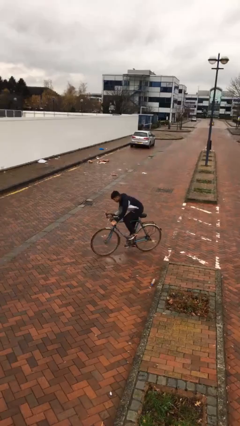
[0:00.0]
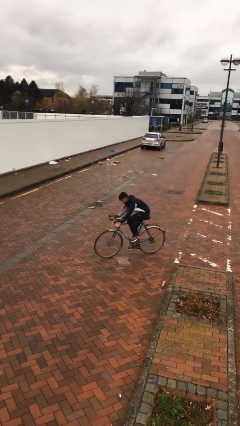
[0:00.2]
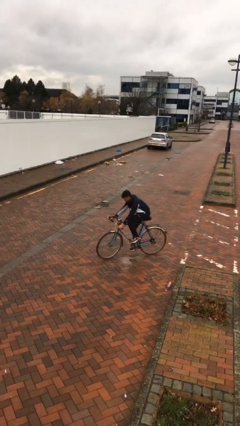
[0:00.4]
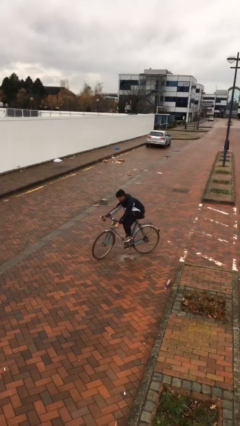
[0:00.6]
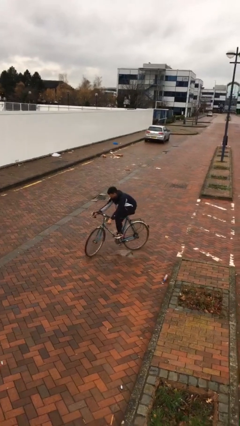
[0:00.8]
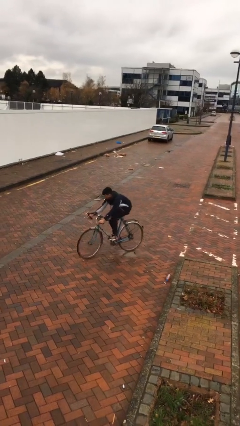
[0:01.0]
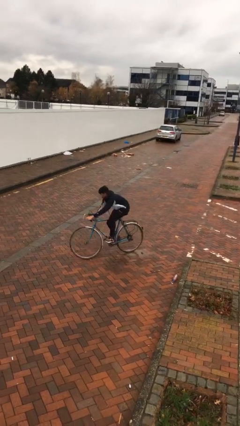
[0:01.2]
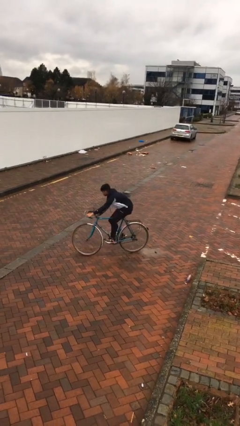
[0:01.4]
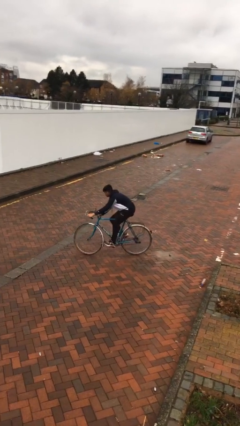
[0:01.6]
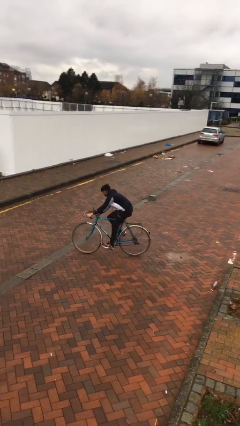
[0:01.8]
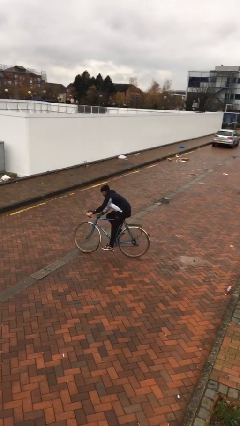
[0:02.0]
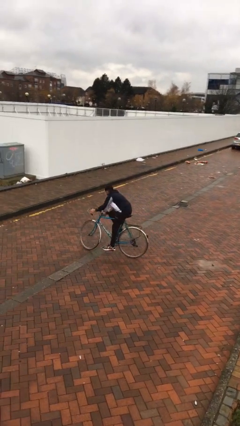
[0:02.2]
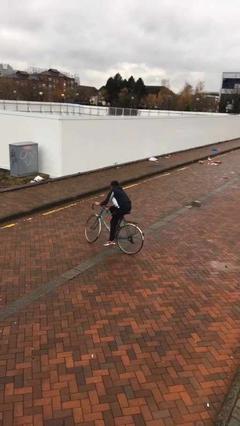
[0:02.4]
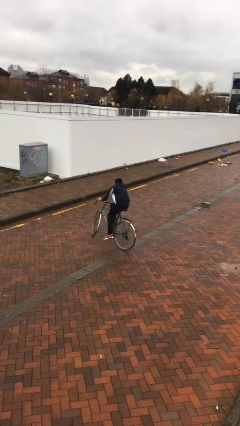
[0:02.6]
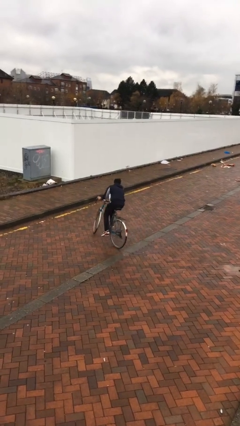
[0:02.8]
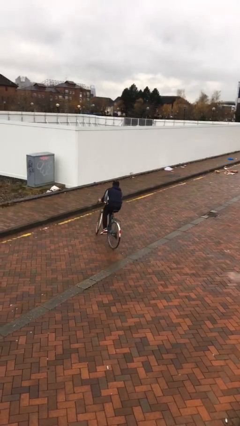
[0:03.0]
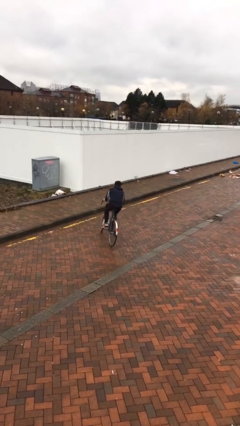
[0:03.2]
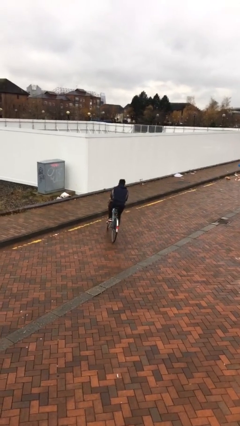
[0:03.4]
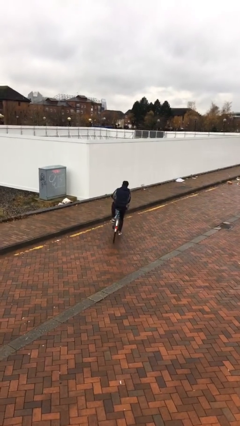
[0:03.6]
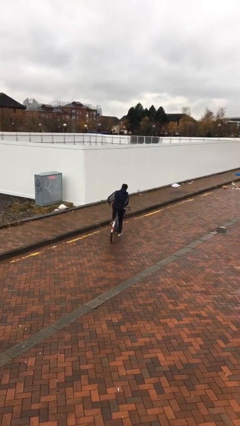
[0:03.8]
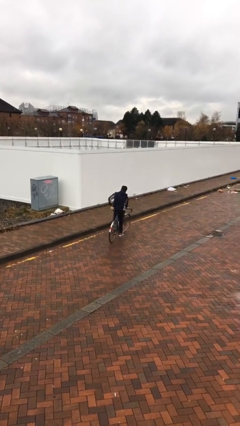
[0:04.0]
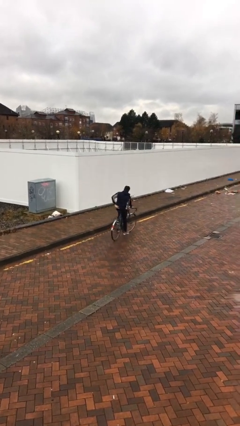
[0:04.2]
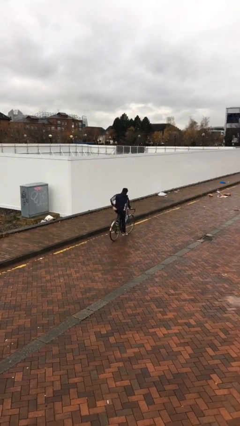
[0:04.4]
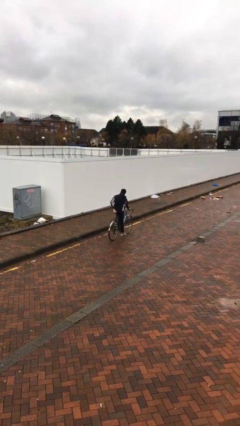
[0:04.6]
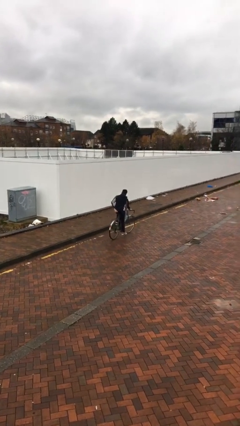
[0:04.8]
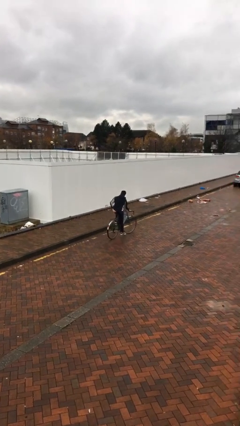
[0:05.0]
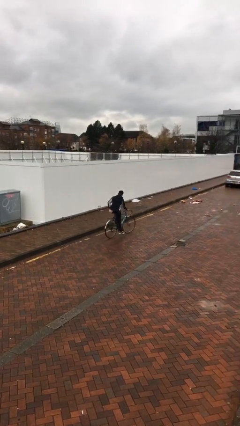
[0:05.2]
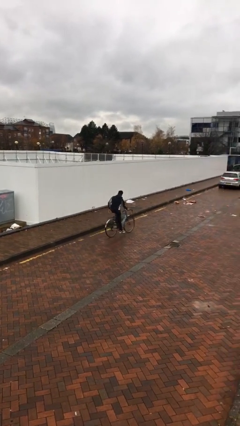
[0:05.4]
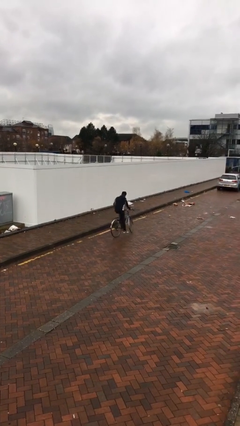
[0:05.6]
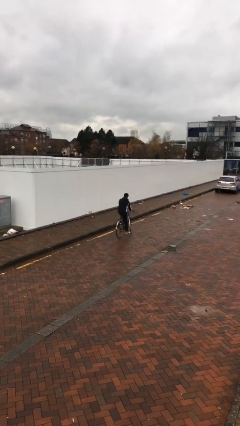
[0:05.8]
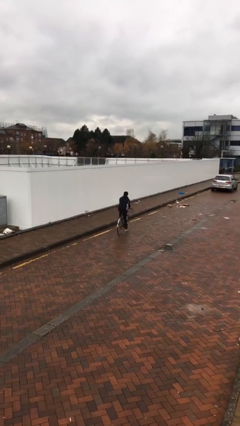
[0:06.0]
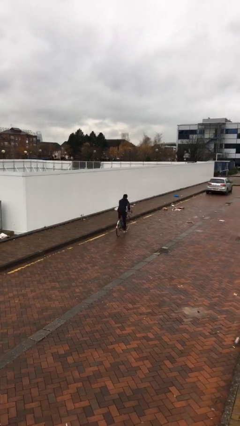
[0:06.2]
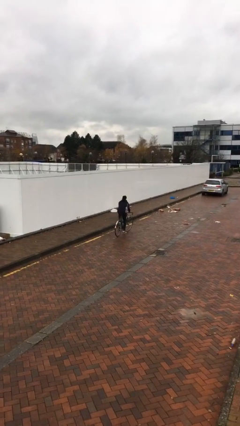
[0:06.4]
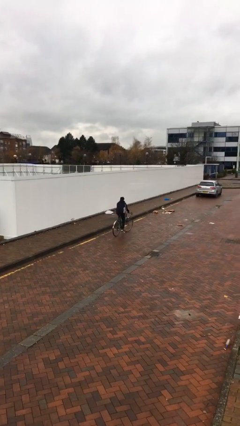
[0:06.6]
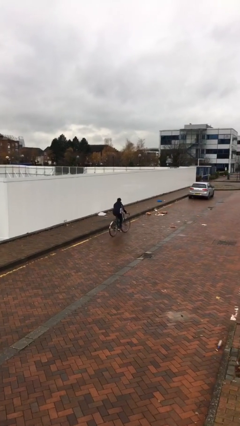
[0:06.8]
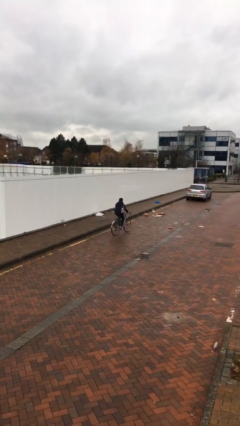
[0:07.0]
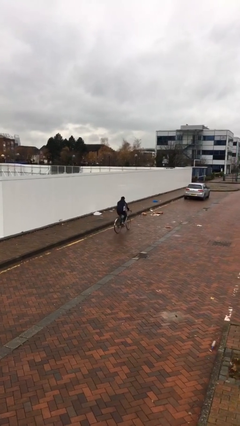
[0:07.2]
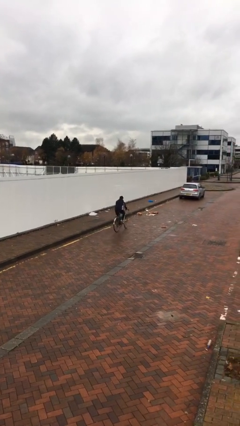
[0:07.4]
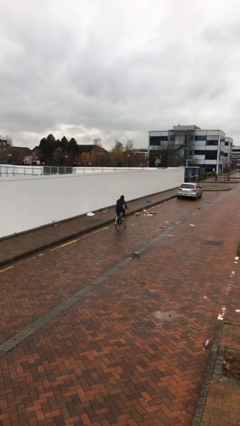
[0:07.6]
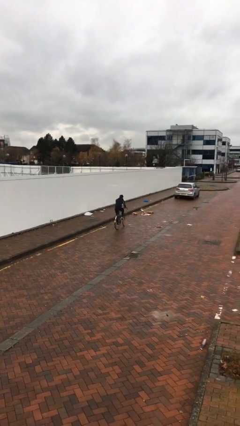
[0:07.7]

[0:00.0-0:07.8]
person rides bicycle

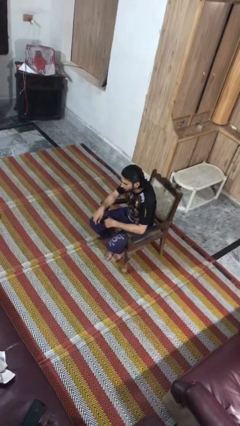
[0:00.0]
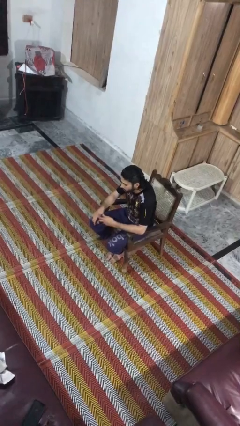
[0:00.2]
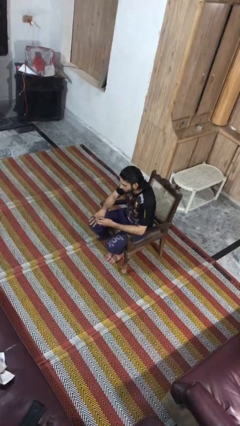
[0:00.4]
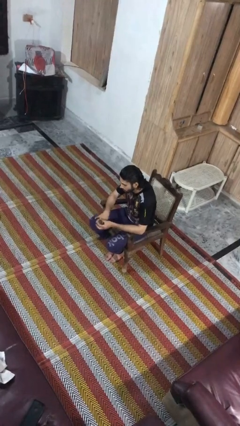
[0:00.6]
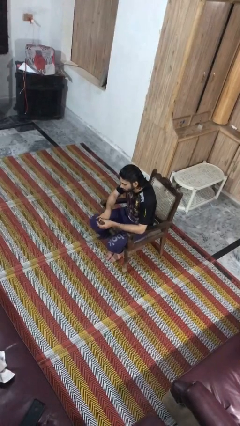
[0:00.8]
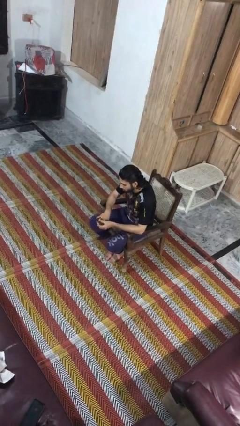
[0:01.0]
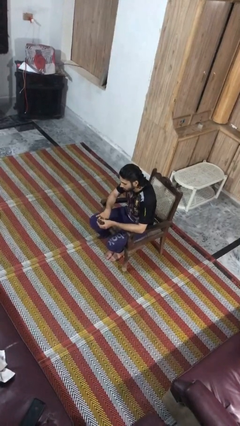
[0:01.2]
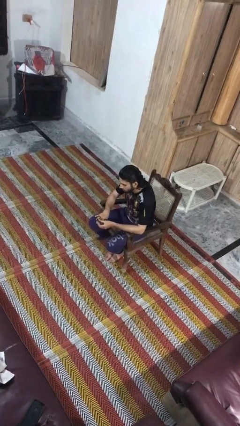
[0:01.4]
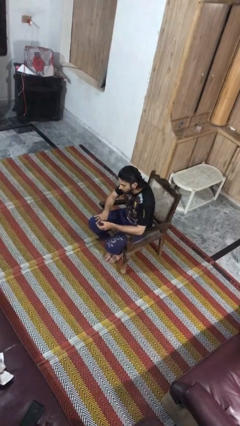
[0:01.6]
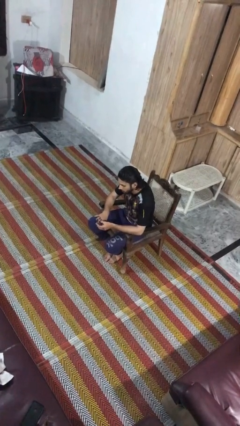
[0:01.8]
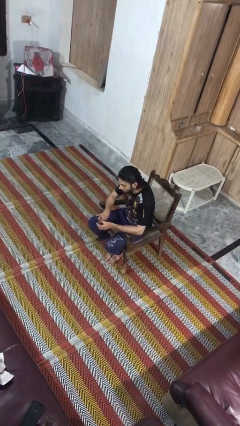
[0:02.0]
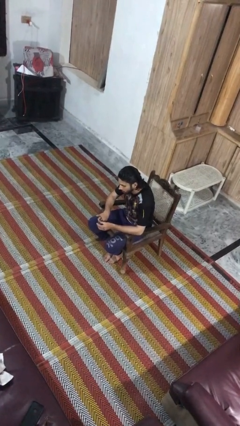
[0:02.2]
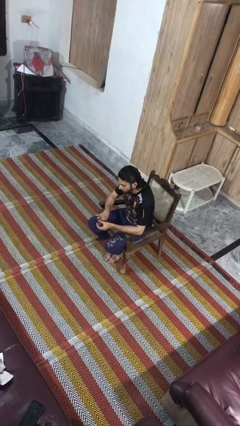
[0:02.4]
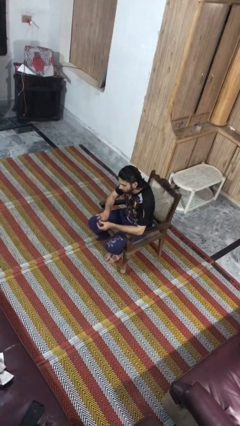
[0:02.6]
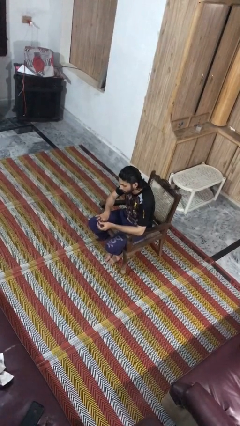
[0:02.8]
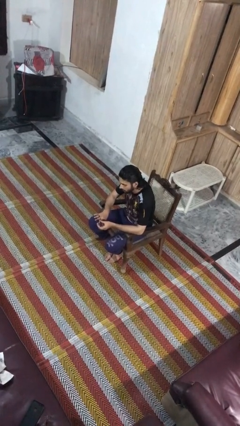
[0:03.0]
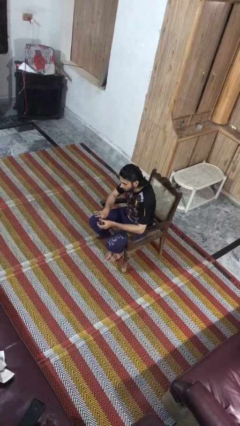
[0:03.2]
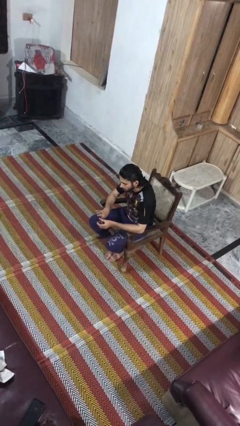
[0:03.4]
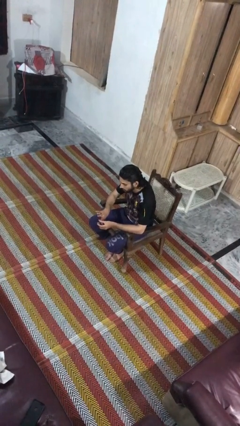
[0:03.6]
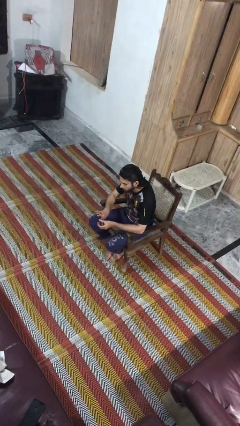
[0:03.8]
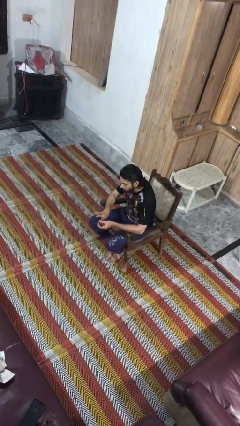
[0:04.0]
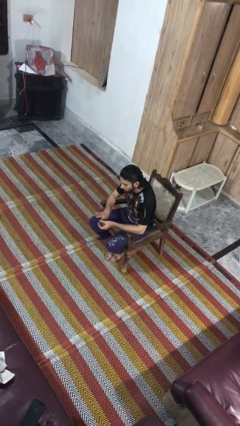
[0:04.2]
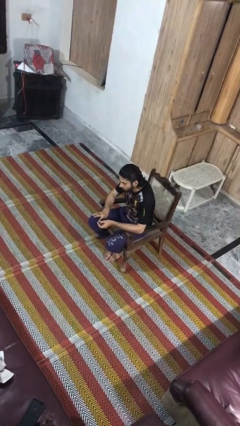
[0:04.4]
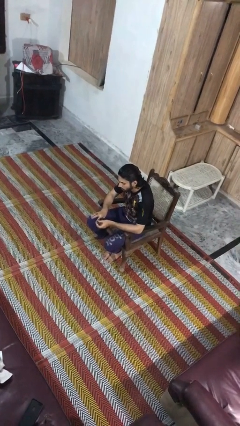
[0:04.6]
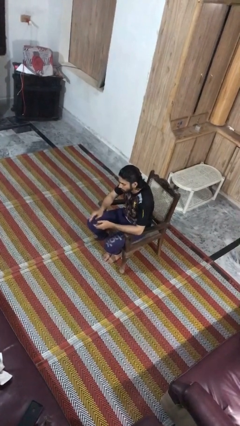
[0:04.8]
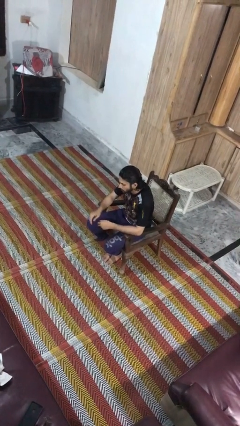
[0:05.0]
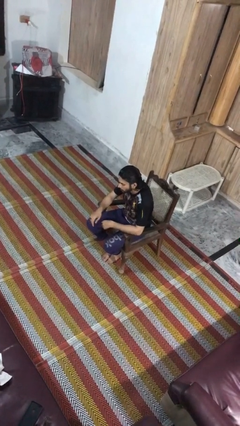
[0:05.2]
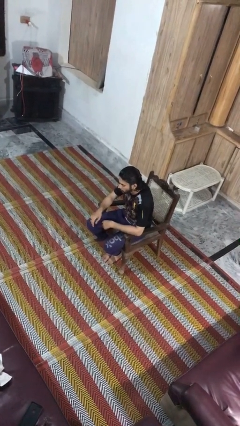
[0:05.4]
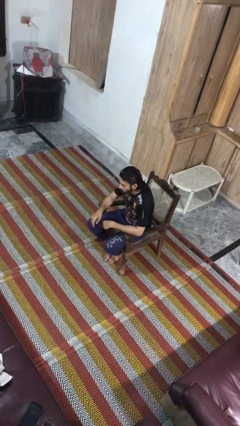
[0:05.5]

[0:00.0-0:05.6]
person clips fingernails

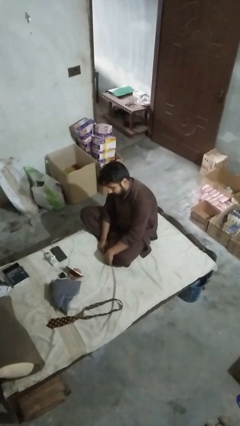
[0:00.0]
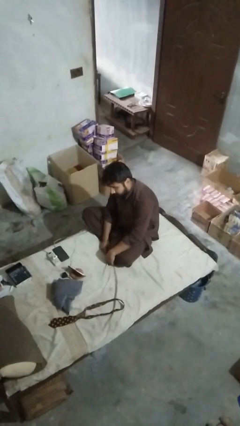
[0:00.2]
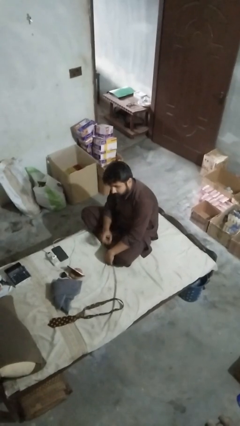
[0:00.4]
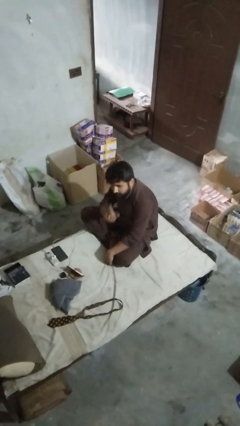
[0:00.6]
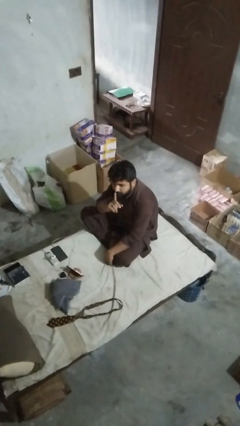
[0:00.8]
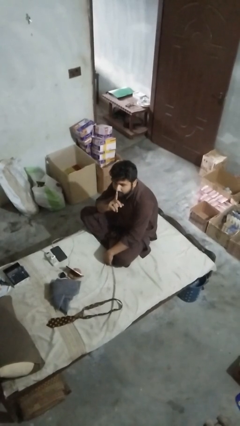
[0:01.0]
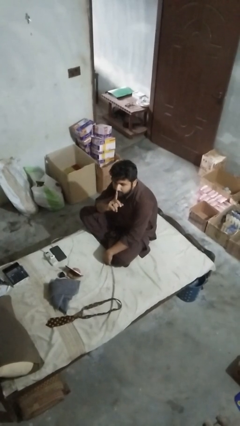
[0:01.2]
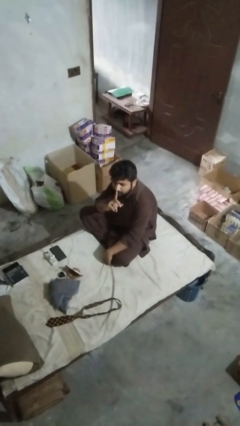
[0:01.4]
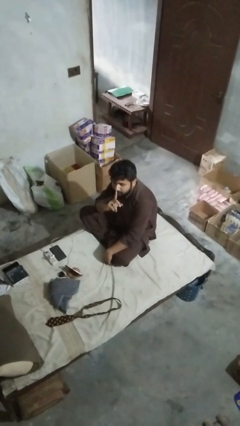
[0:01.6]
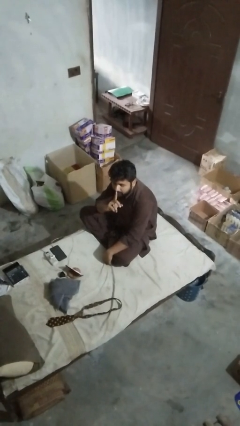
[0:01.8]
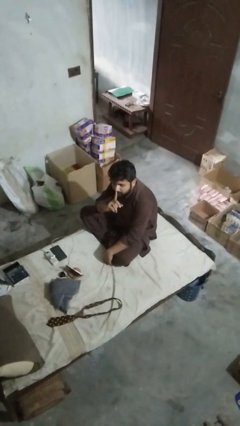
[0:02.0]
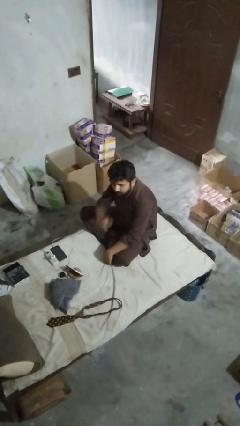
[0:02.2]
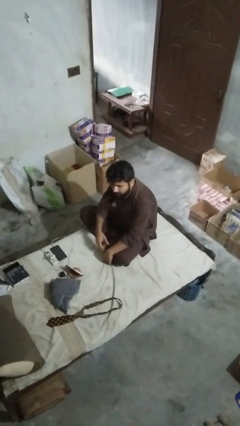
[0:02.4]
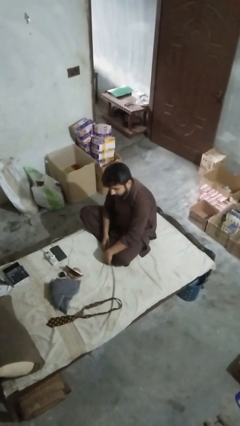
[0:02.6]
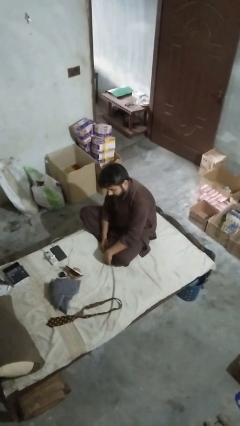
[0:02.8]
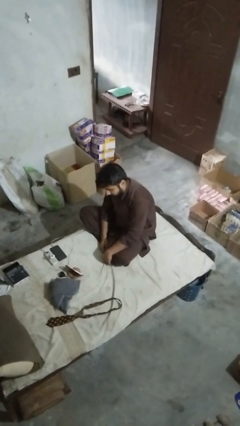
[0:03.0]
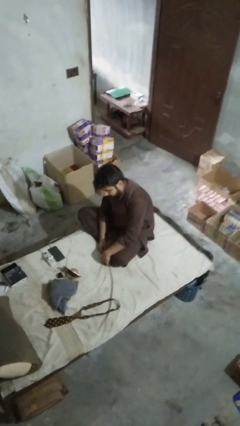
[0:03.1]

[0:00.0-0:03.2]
person gestures be quiet

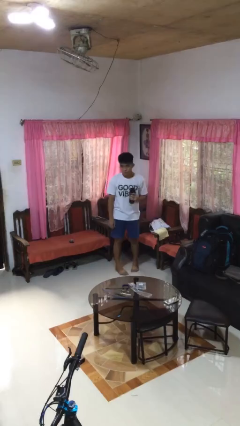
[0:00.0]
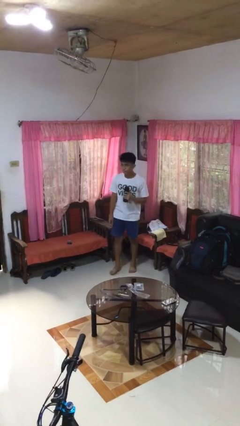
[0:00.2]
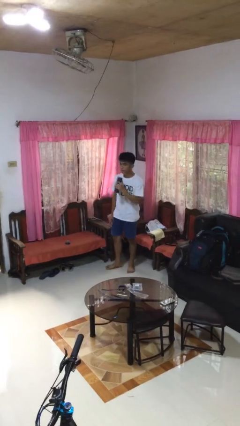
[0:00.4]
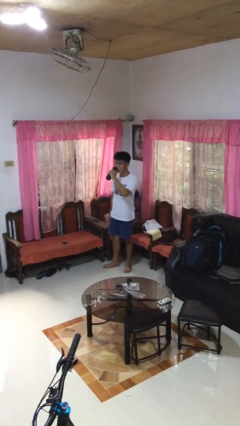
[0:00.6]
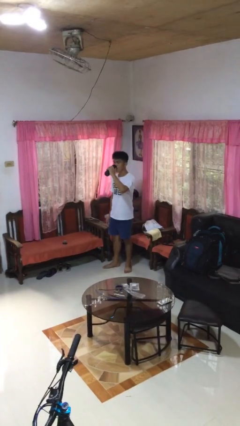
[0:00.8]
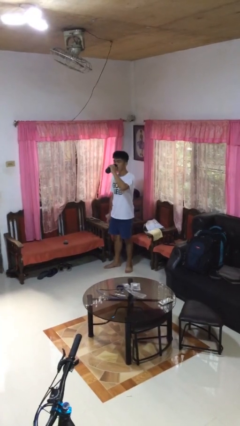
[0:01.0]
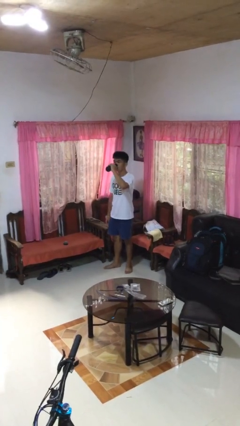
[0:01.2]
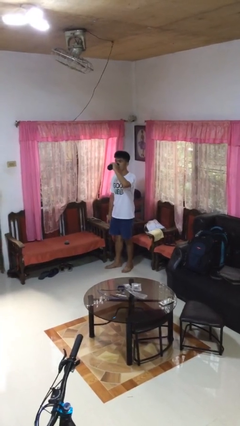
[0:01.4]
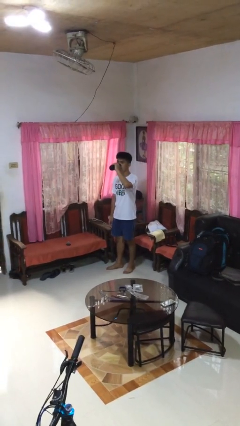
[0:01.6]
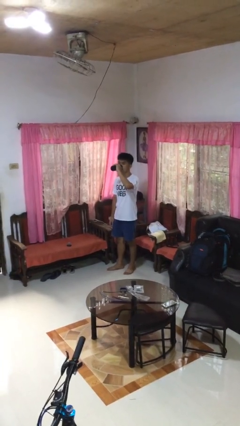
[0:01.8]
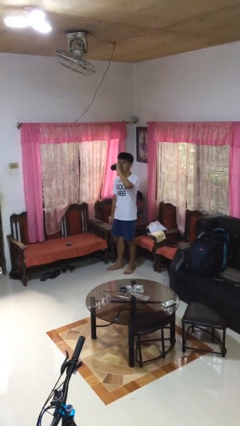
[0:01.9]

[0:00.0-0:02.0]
person drinks from bottle
